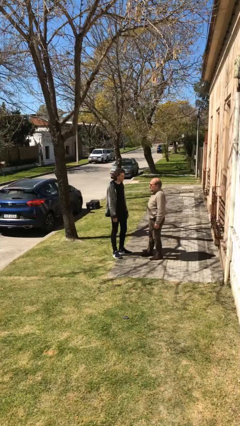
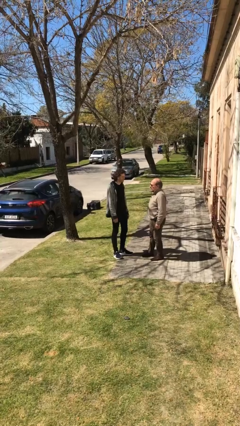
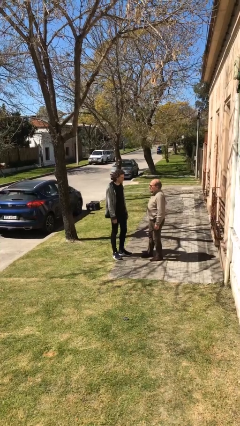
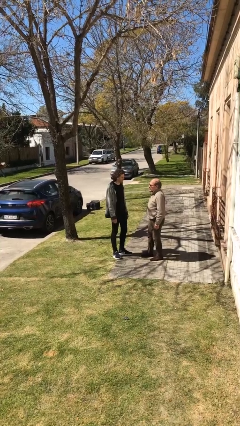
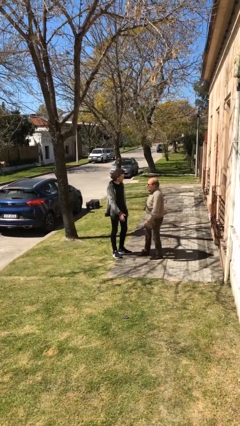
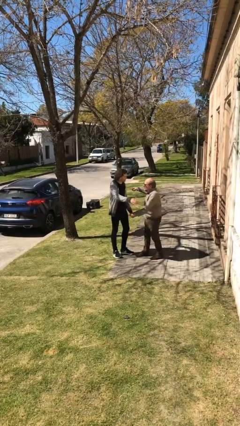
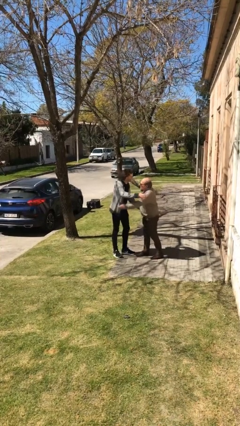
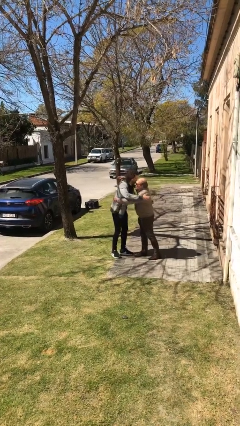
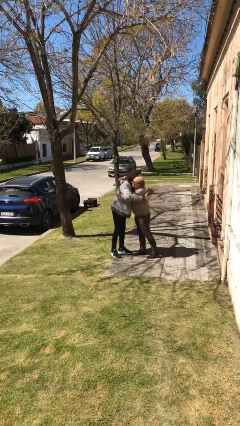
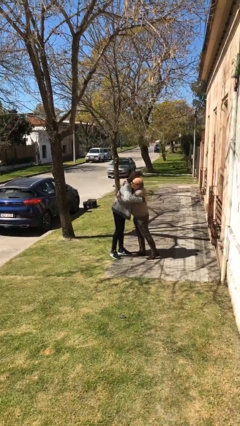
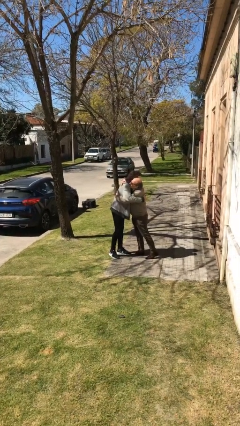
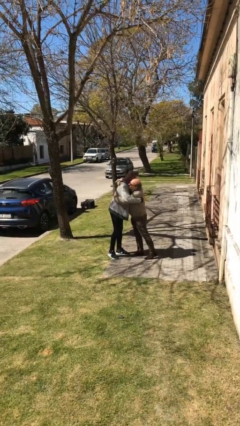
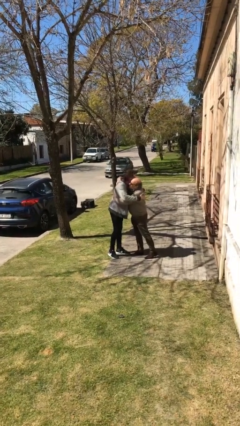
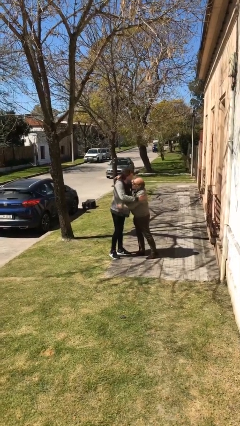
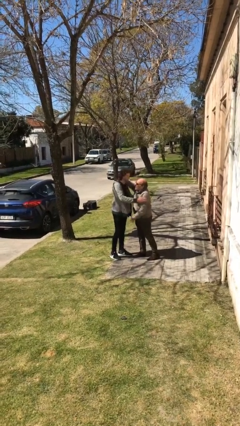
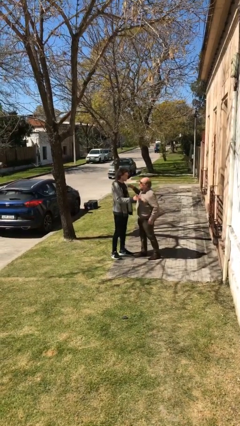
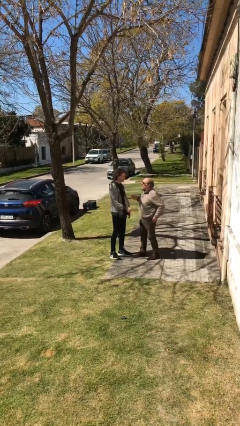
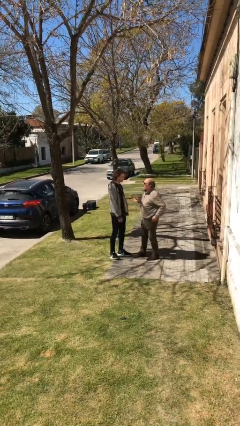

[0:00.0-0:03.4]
person embraces person

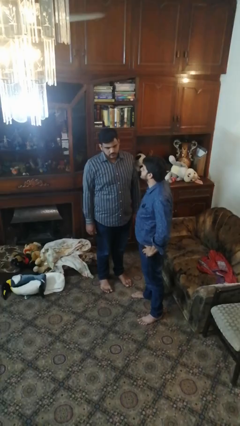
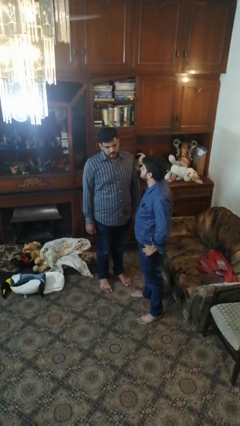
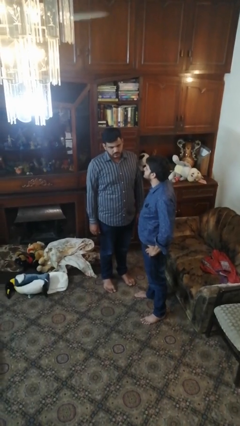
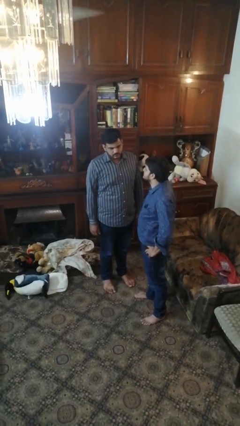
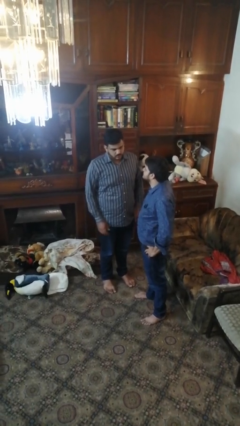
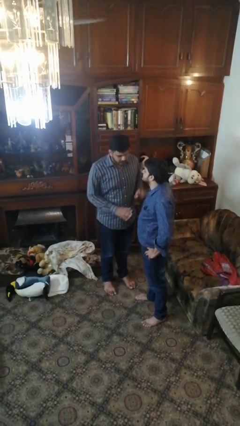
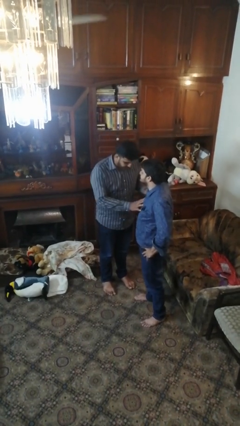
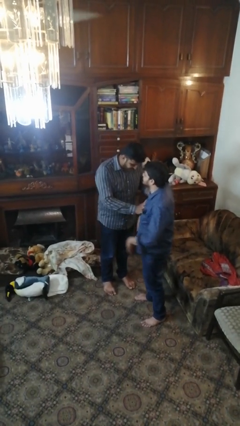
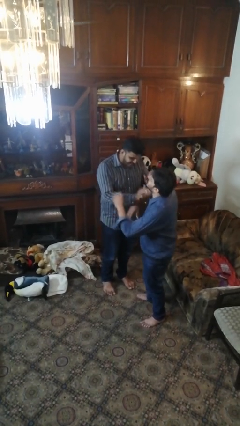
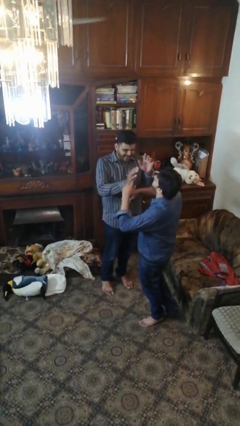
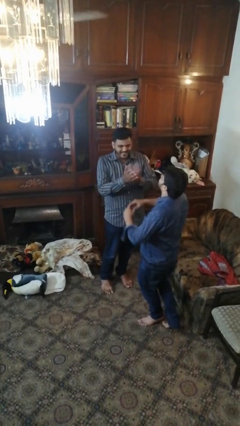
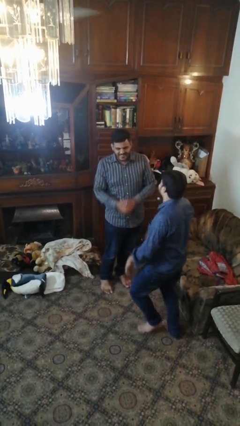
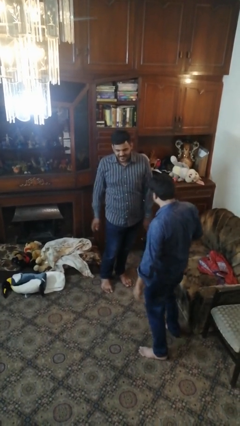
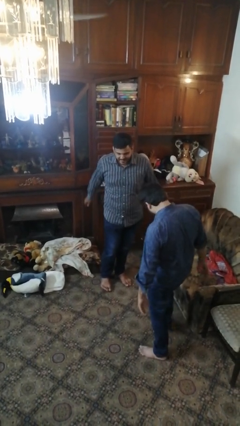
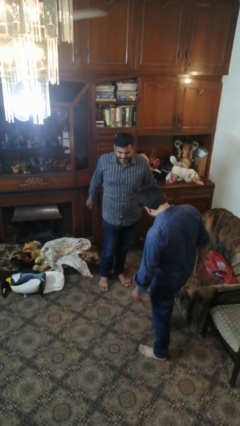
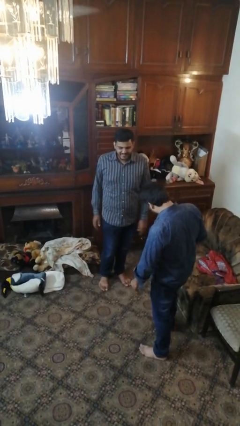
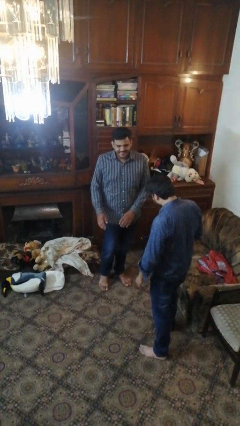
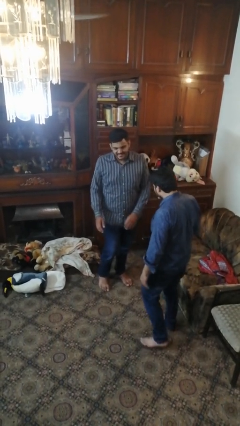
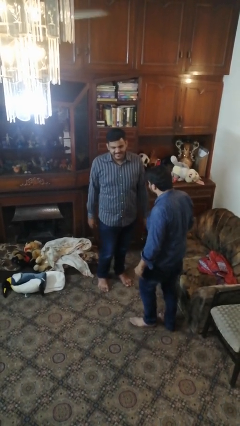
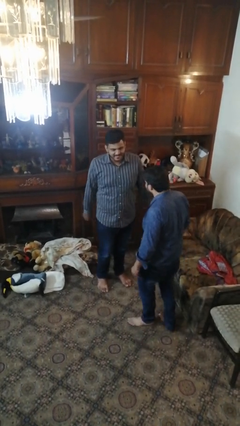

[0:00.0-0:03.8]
person shoves person

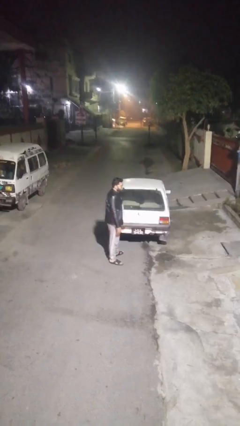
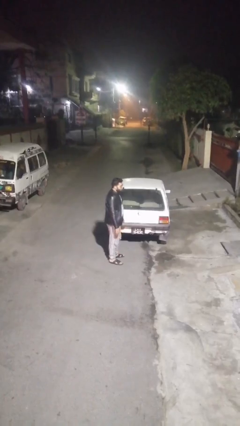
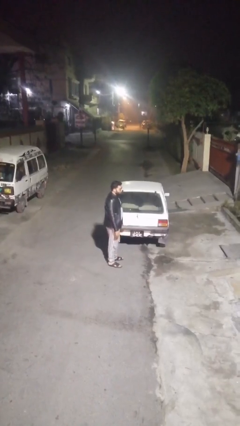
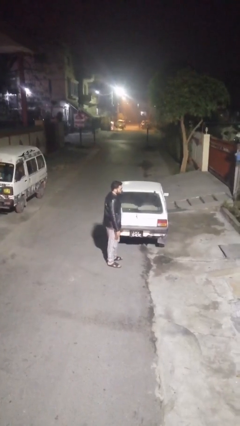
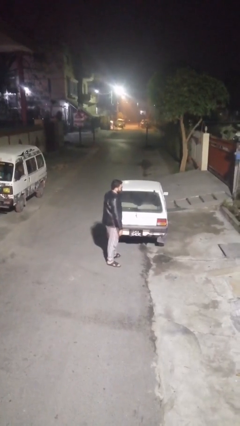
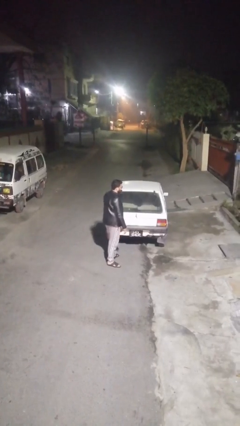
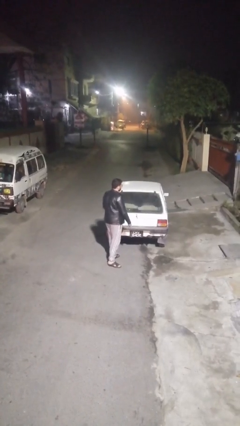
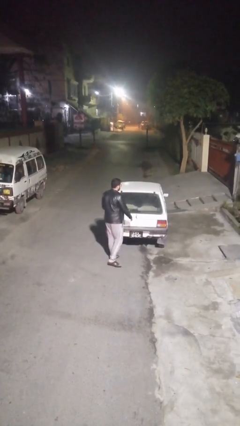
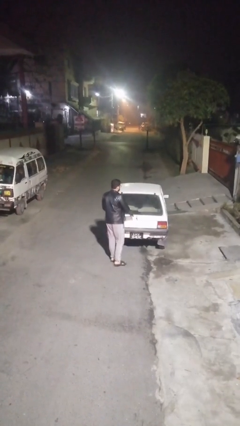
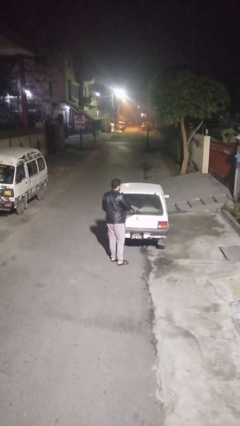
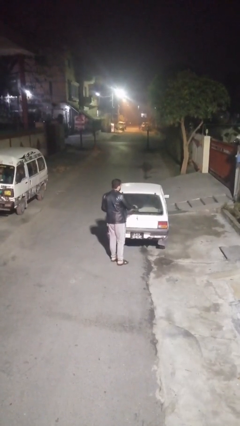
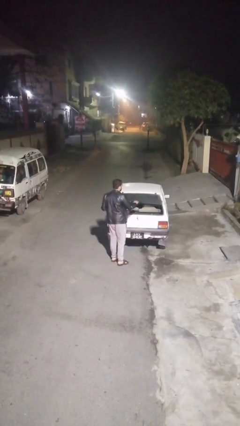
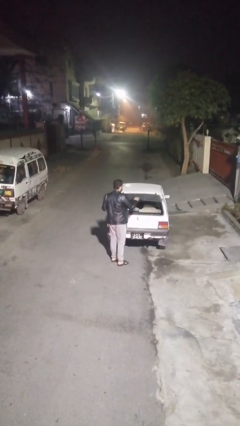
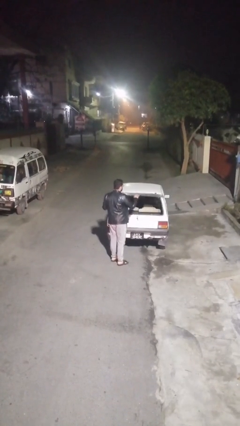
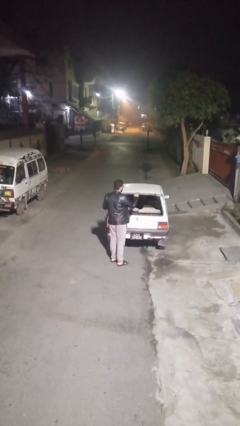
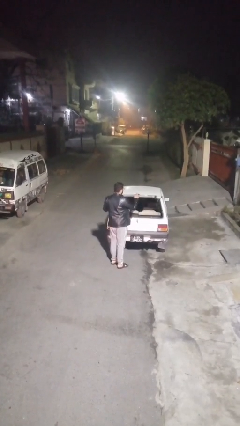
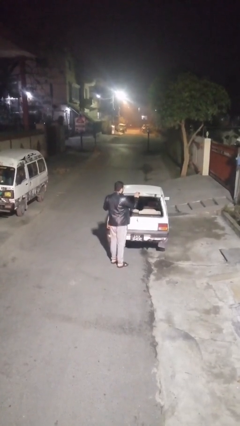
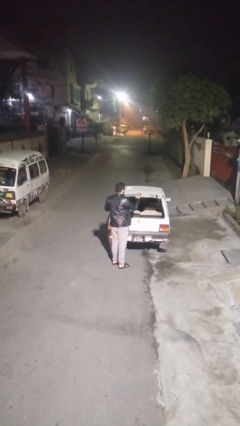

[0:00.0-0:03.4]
person opens car trunk

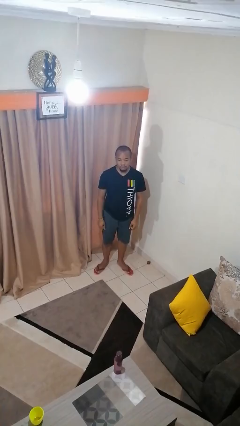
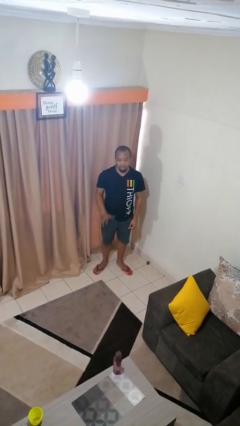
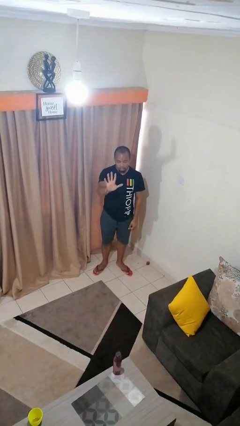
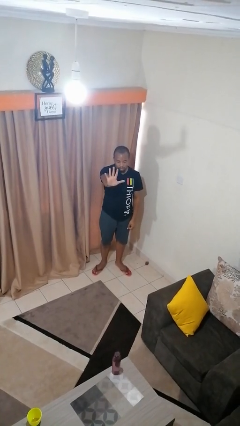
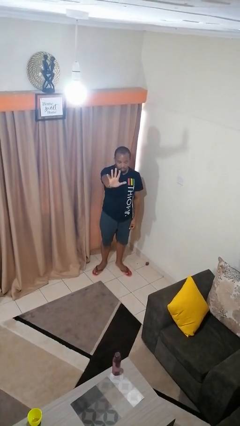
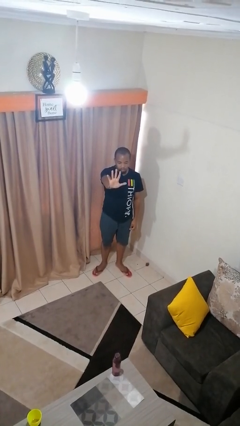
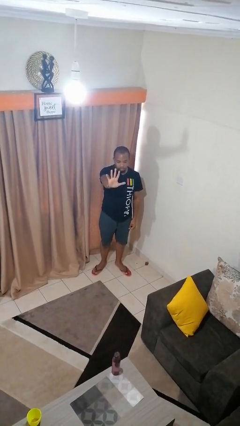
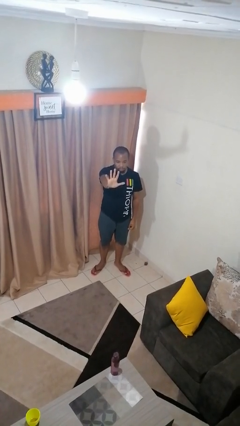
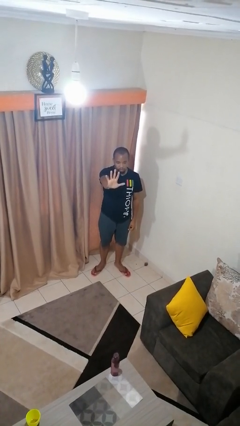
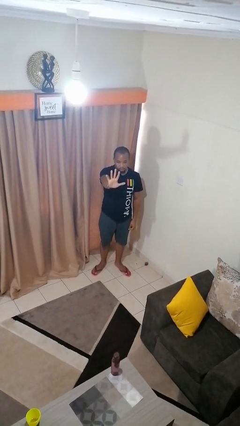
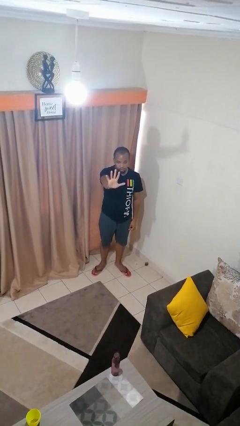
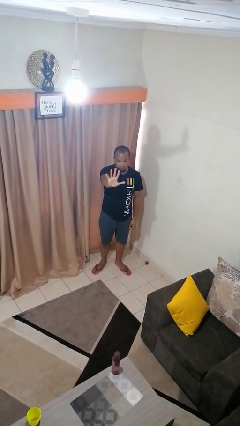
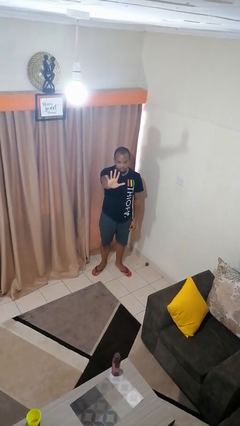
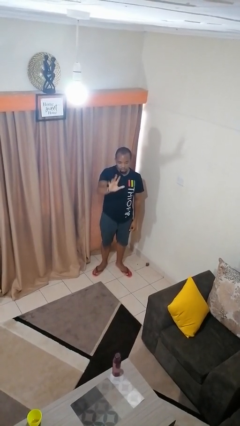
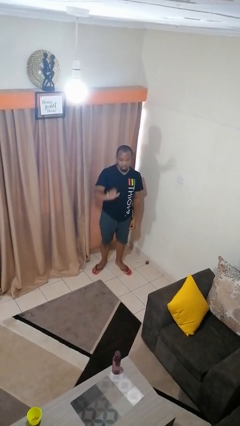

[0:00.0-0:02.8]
person gestures number five

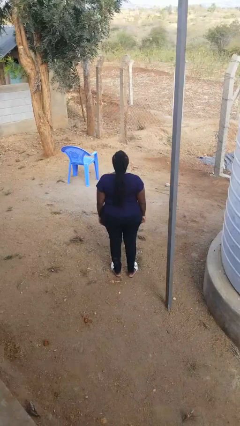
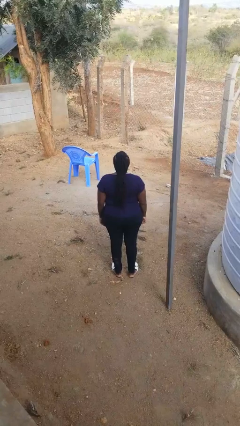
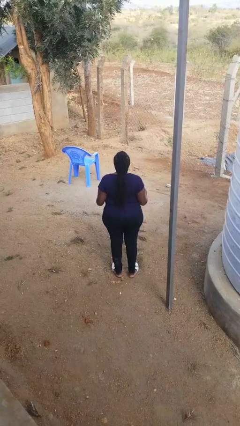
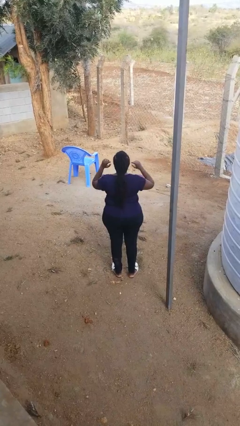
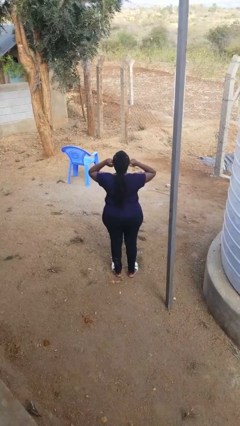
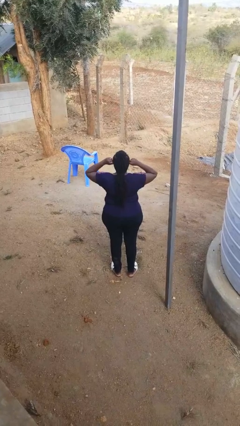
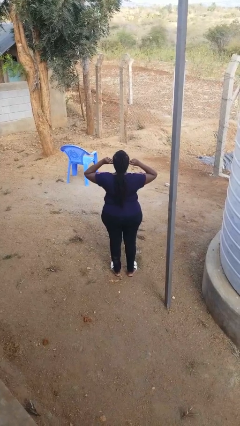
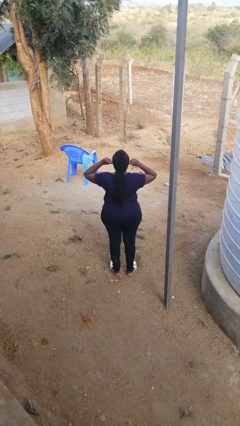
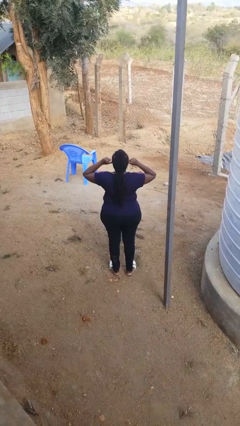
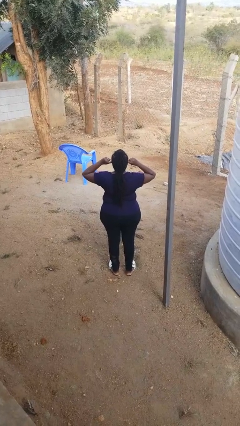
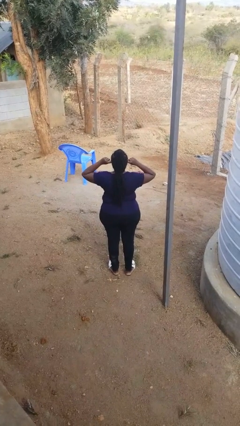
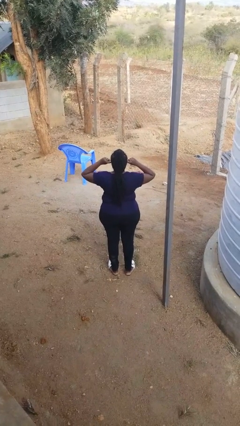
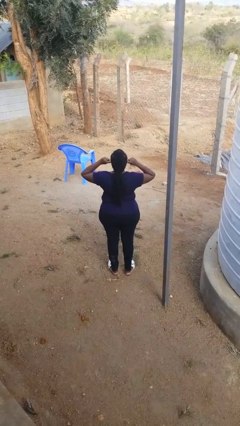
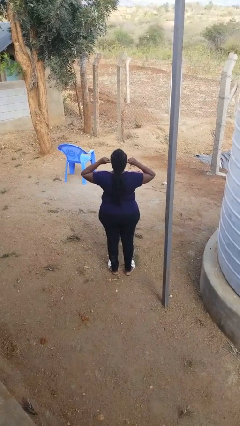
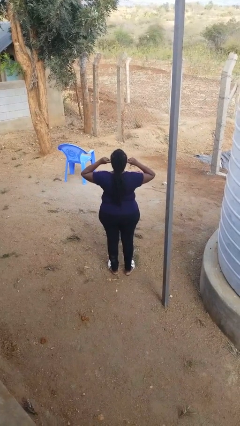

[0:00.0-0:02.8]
person puts fingers in ear

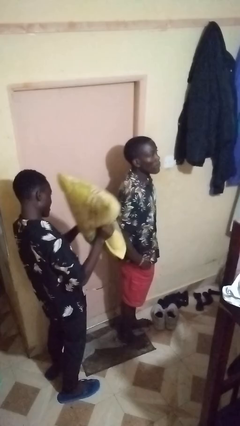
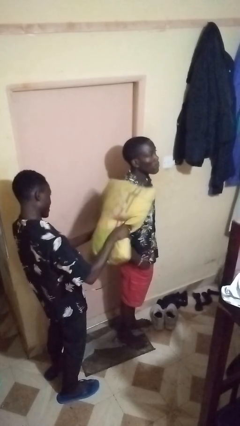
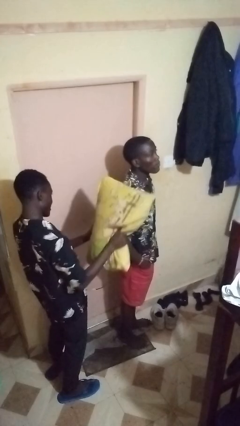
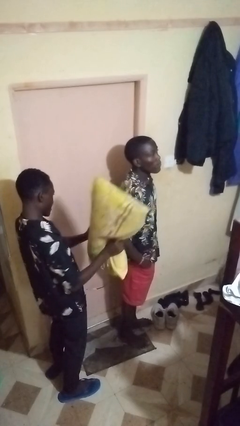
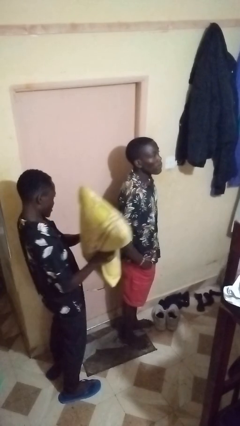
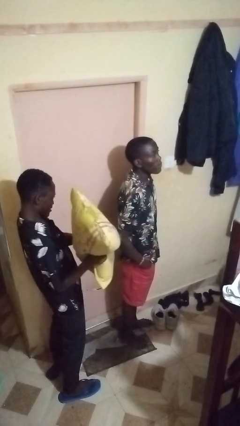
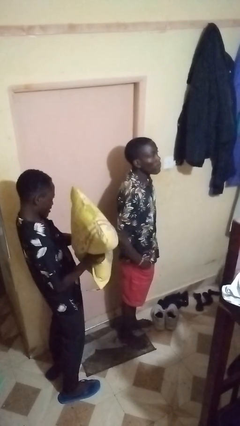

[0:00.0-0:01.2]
person hits person with pillow
